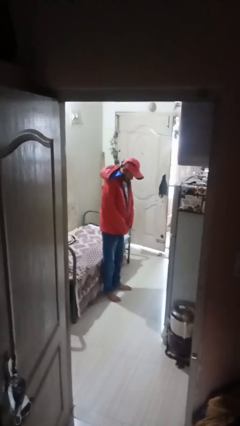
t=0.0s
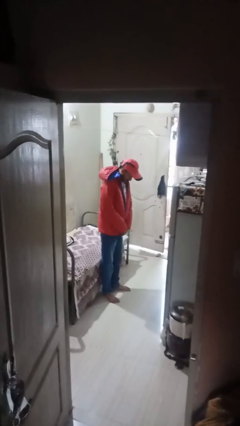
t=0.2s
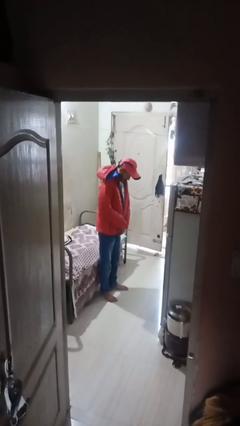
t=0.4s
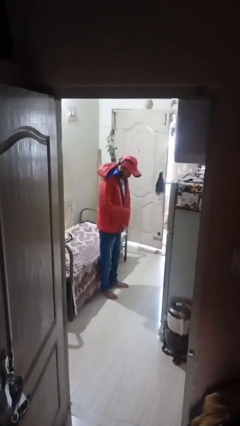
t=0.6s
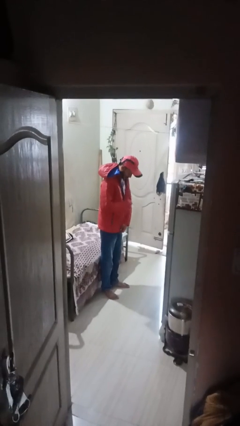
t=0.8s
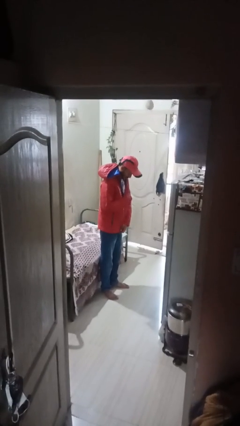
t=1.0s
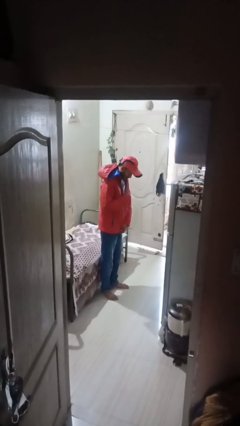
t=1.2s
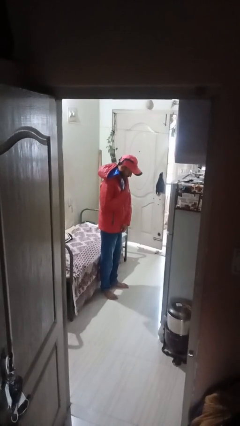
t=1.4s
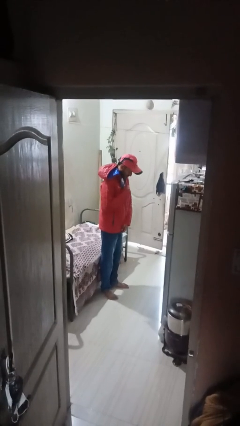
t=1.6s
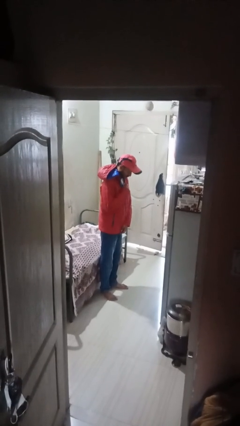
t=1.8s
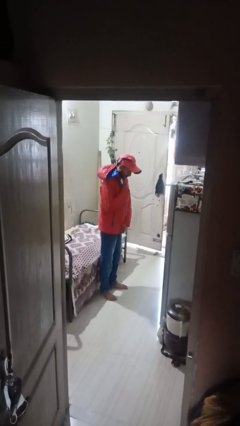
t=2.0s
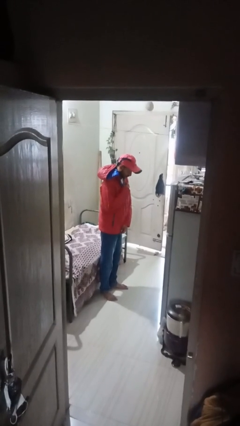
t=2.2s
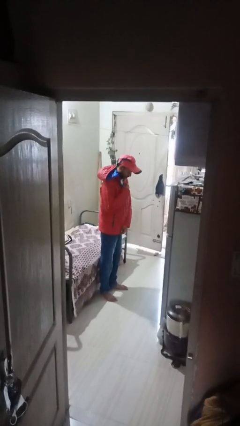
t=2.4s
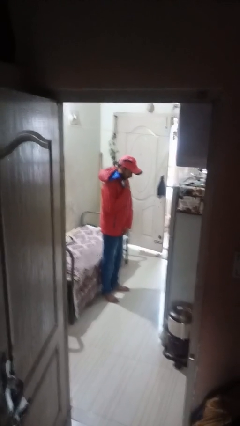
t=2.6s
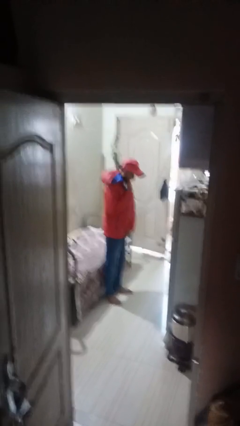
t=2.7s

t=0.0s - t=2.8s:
person zips up jacket

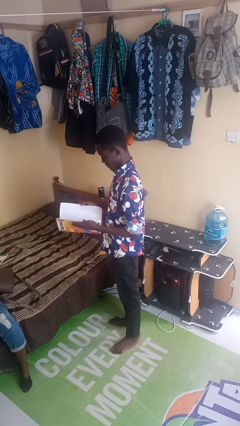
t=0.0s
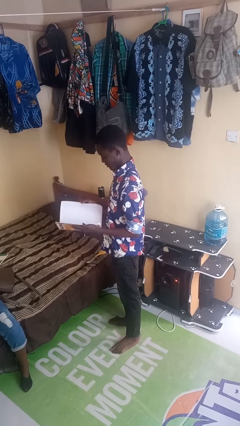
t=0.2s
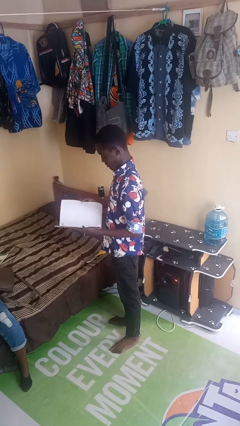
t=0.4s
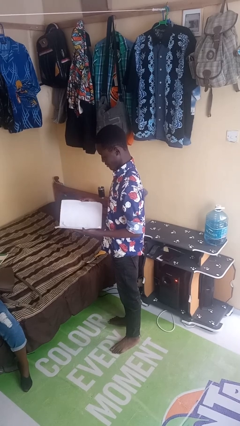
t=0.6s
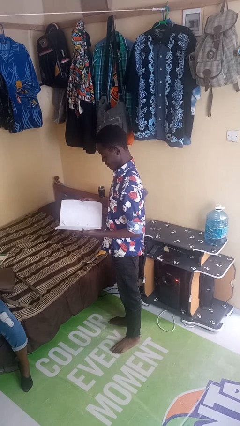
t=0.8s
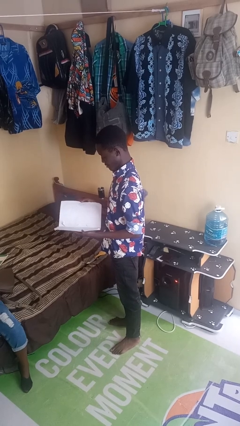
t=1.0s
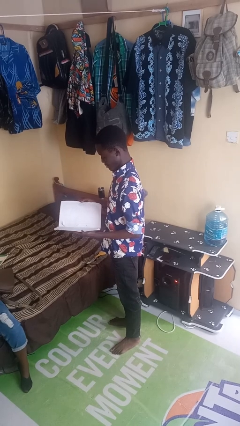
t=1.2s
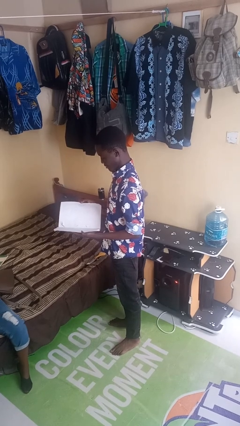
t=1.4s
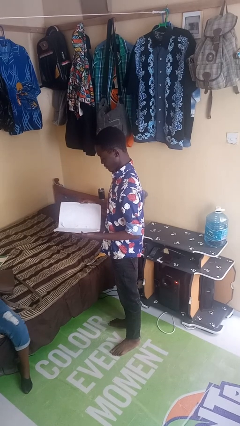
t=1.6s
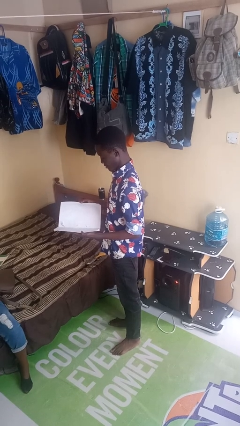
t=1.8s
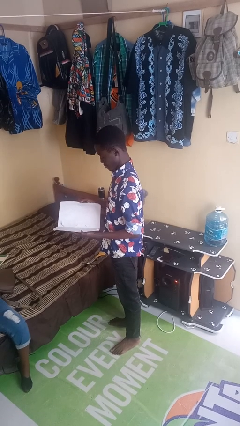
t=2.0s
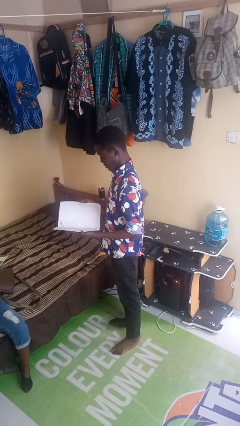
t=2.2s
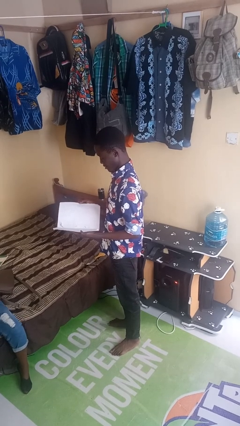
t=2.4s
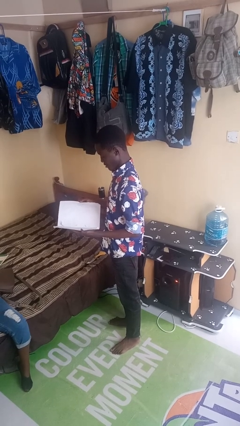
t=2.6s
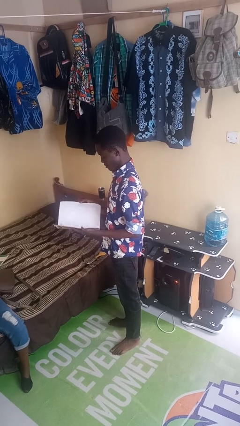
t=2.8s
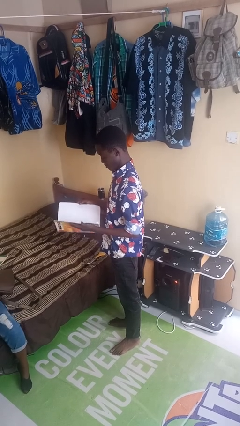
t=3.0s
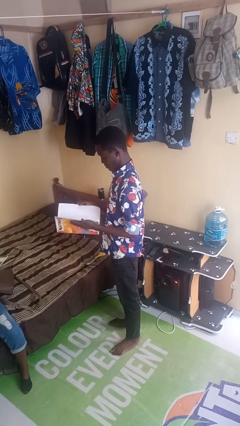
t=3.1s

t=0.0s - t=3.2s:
person reads book

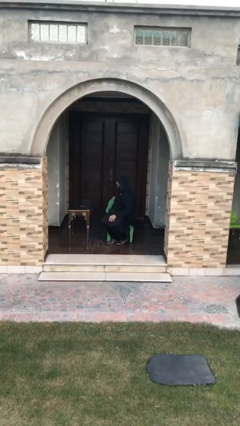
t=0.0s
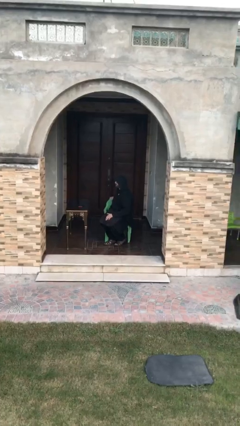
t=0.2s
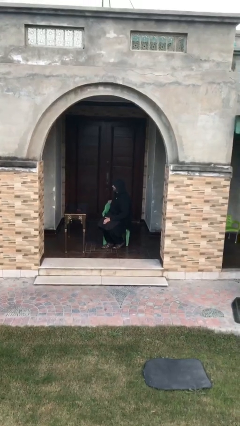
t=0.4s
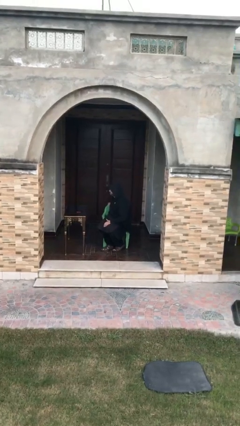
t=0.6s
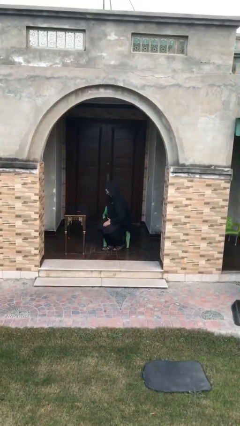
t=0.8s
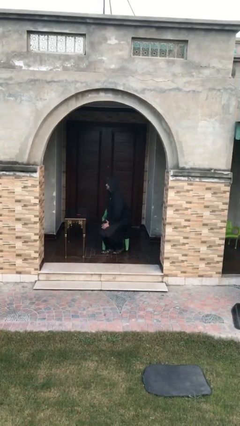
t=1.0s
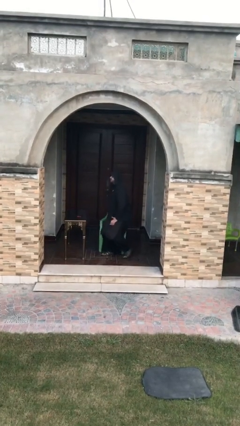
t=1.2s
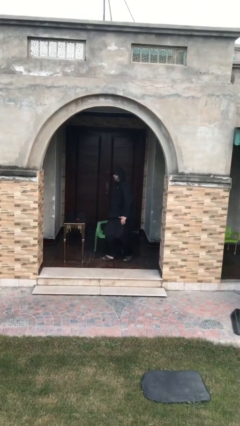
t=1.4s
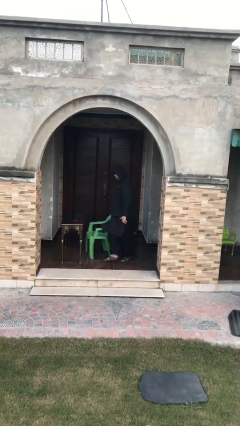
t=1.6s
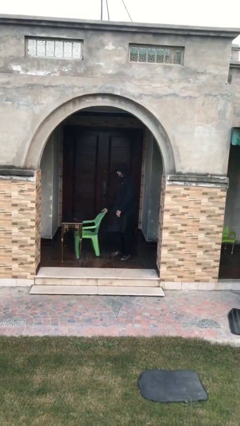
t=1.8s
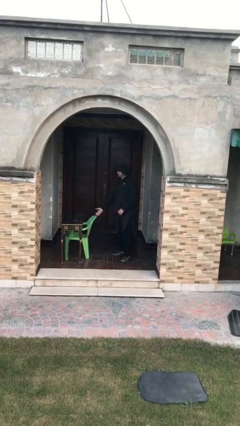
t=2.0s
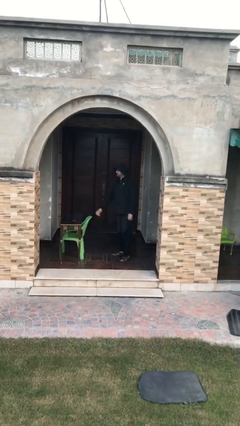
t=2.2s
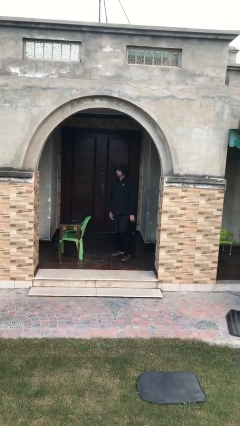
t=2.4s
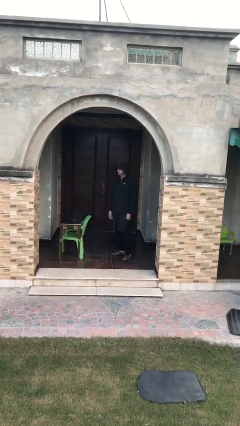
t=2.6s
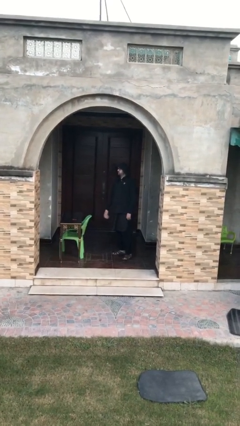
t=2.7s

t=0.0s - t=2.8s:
person stands up

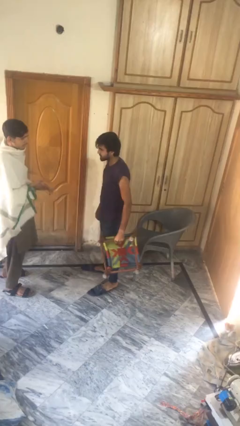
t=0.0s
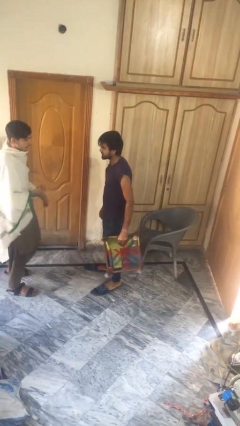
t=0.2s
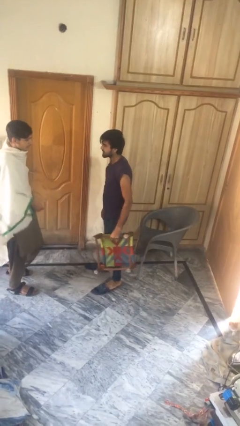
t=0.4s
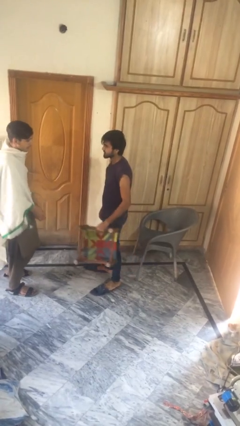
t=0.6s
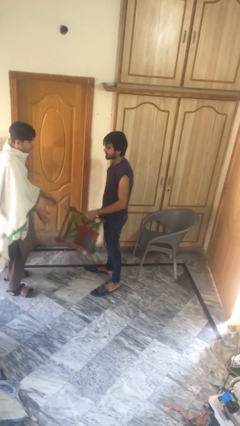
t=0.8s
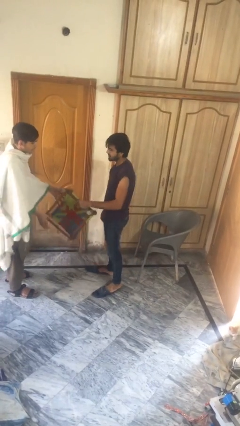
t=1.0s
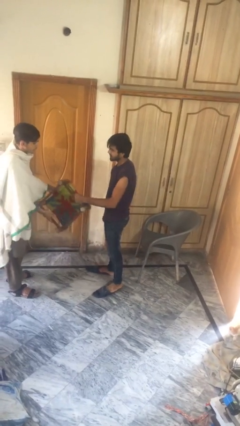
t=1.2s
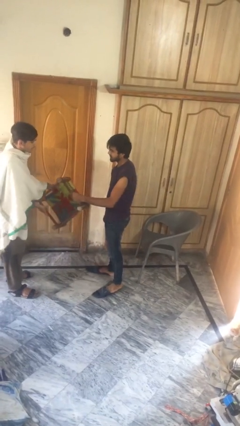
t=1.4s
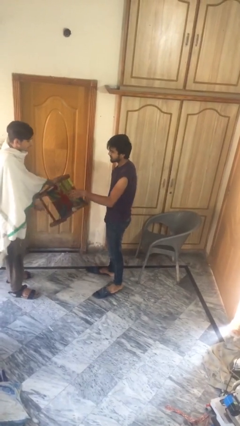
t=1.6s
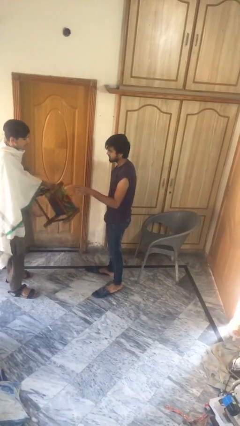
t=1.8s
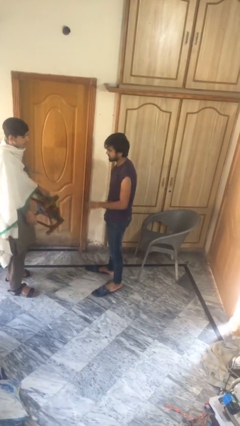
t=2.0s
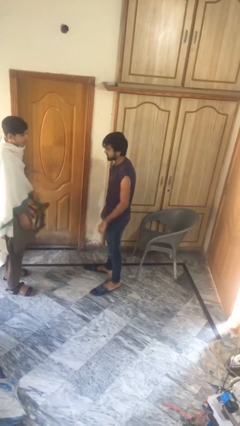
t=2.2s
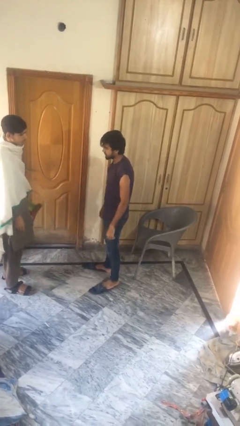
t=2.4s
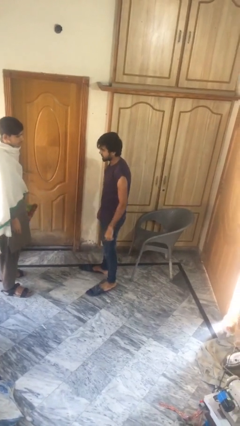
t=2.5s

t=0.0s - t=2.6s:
person transfers object to person

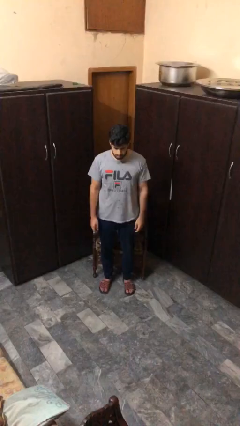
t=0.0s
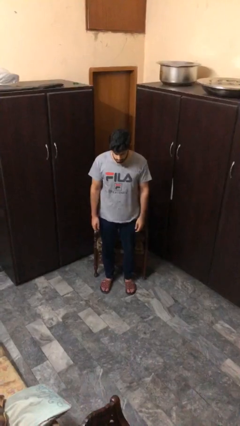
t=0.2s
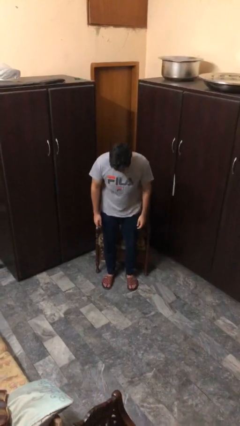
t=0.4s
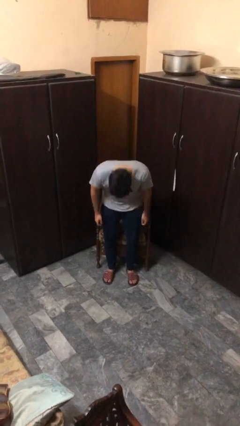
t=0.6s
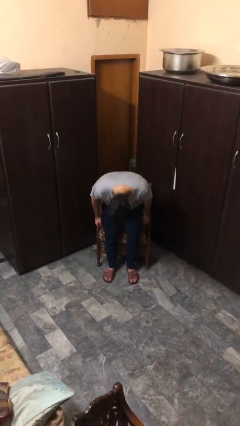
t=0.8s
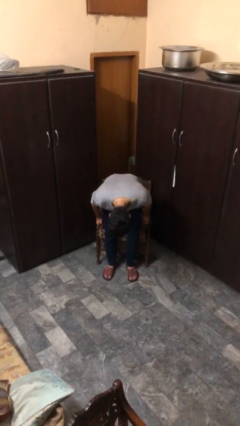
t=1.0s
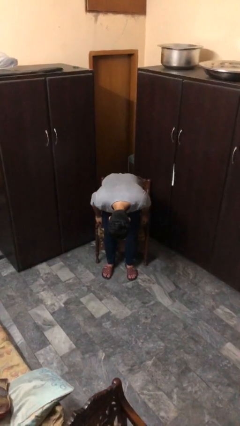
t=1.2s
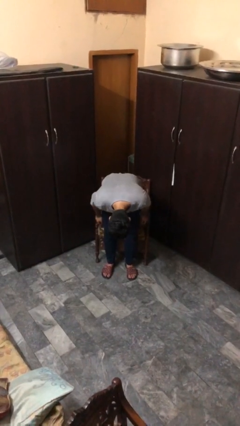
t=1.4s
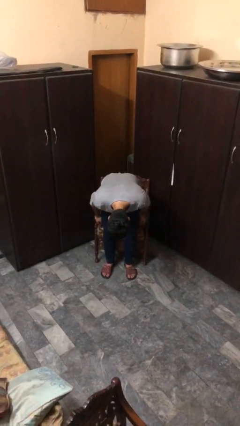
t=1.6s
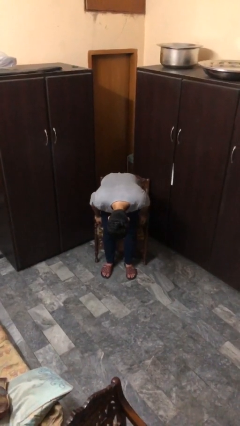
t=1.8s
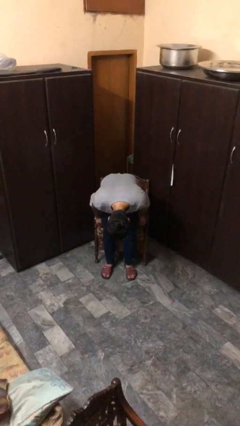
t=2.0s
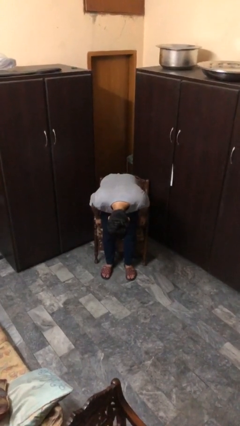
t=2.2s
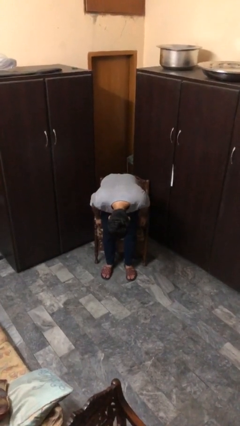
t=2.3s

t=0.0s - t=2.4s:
person bows

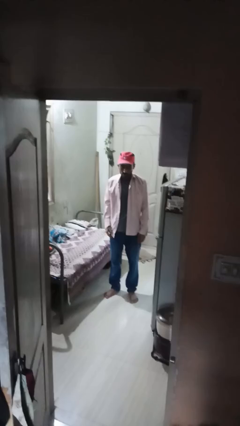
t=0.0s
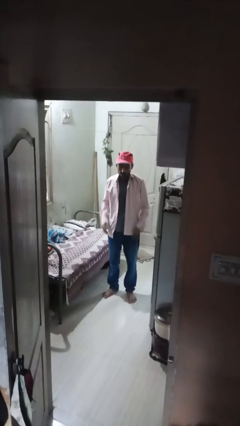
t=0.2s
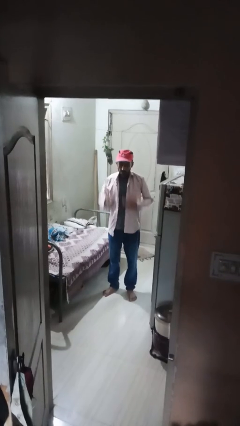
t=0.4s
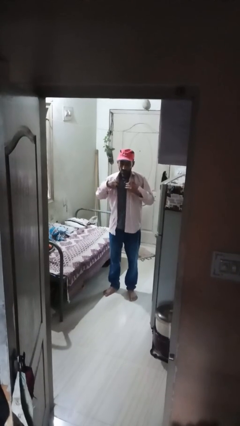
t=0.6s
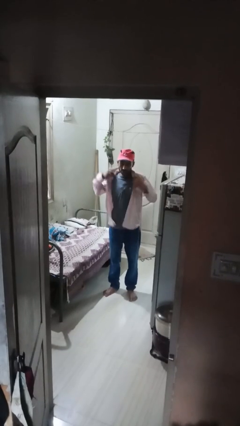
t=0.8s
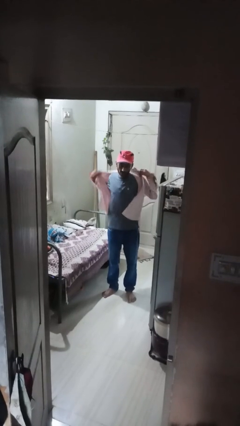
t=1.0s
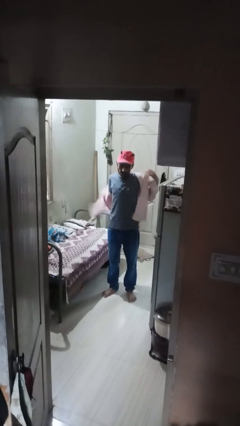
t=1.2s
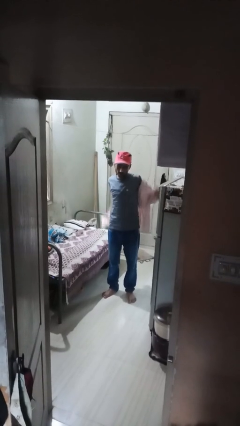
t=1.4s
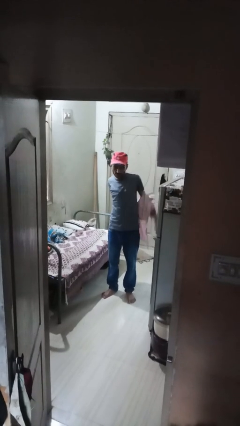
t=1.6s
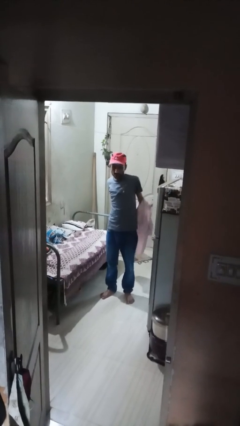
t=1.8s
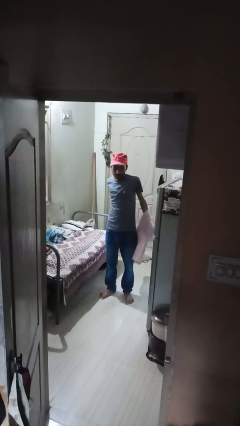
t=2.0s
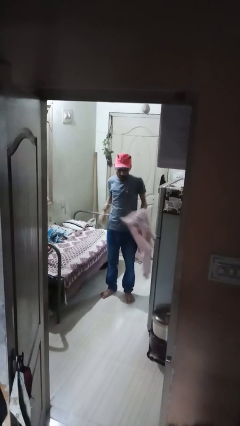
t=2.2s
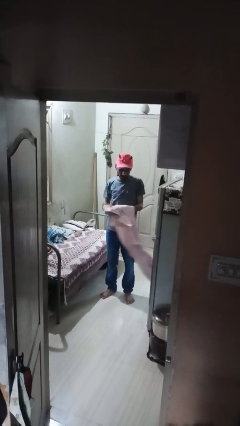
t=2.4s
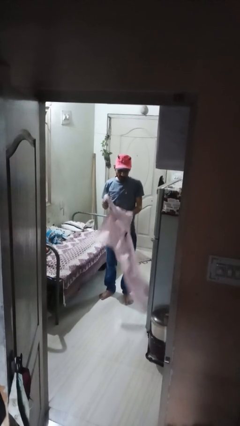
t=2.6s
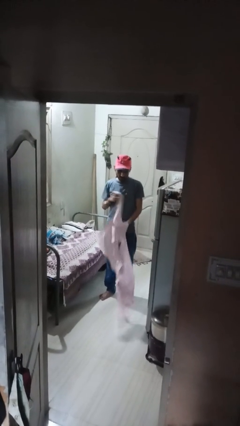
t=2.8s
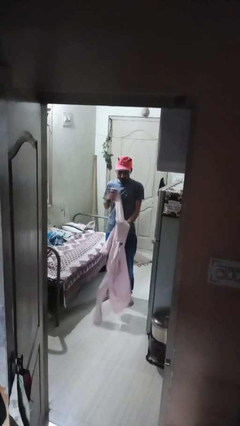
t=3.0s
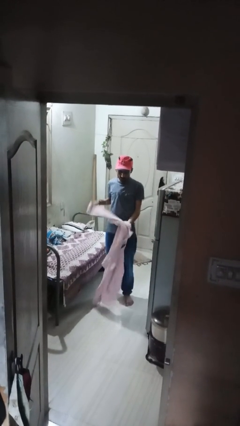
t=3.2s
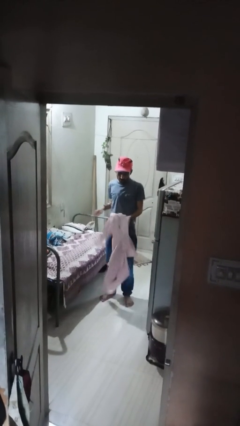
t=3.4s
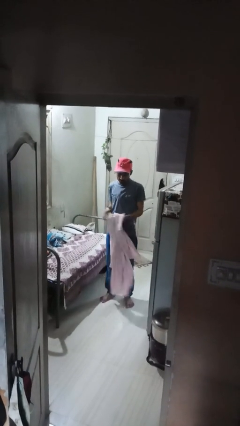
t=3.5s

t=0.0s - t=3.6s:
person takes off shirt
